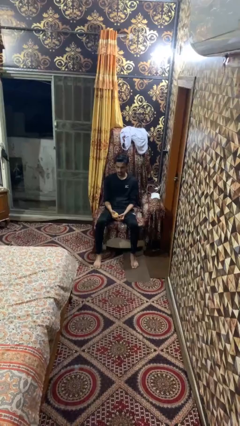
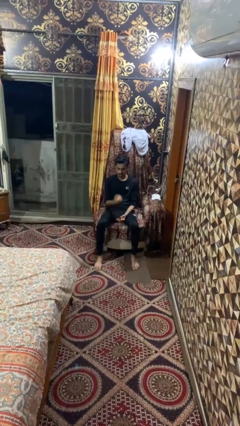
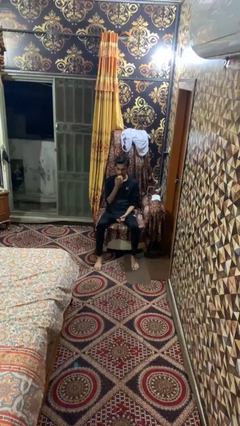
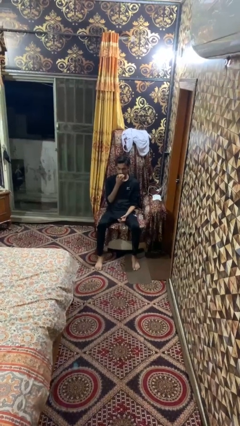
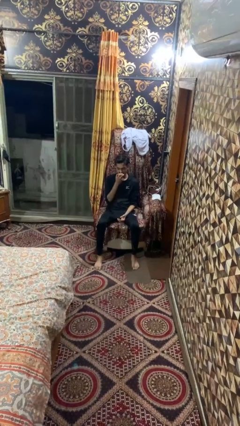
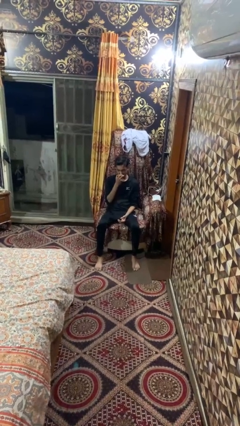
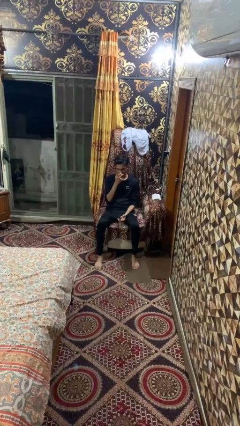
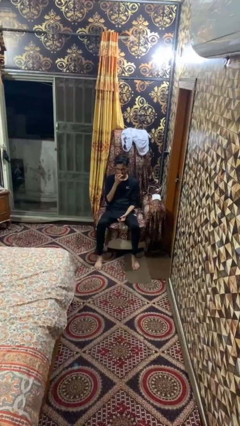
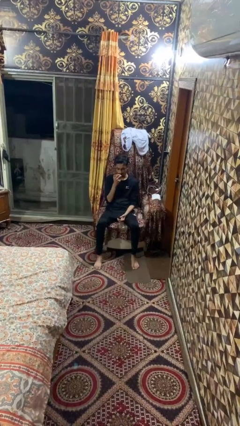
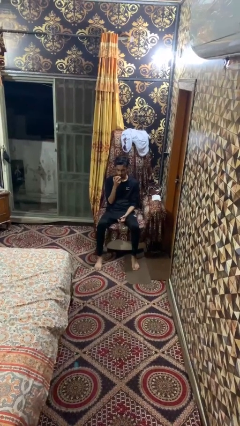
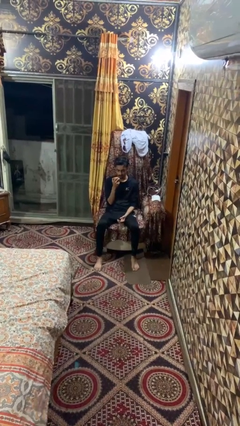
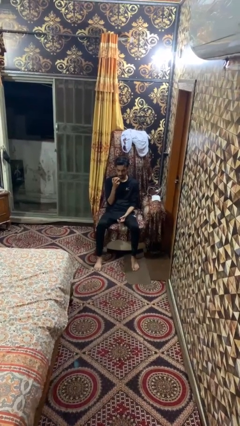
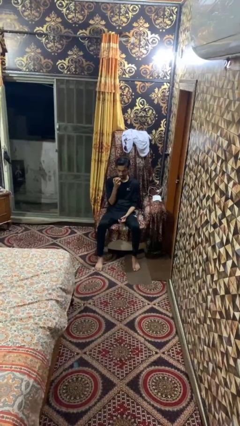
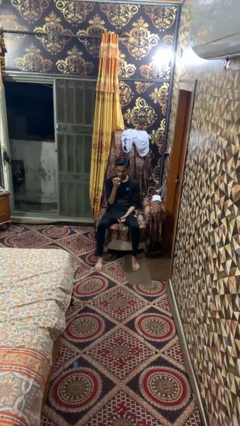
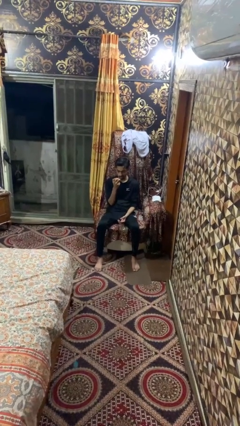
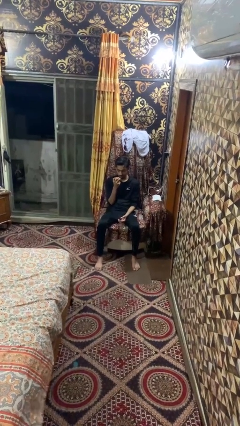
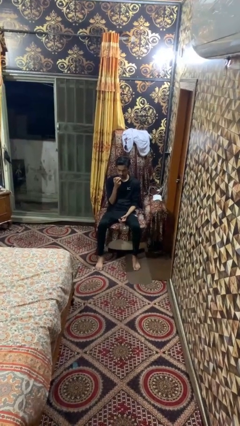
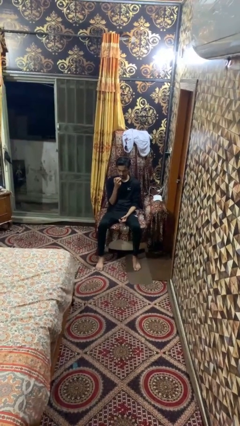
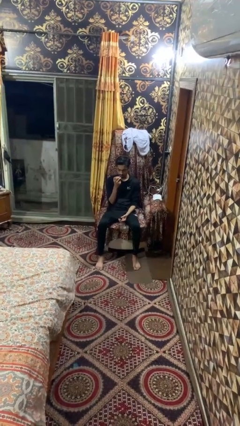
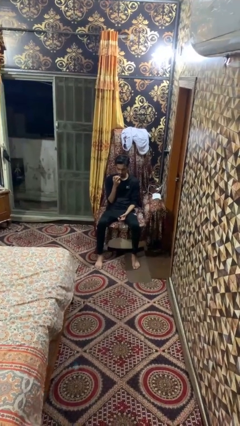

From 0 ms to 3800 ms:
person eats apple

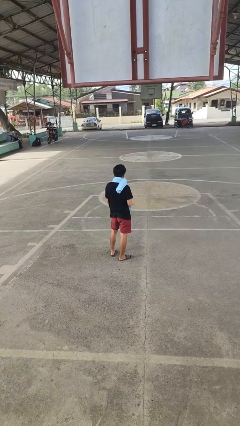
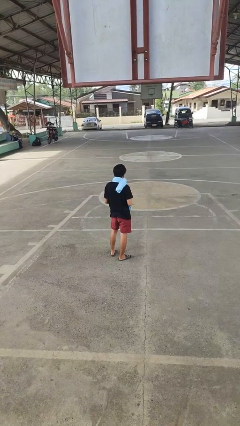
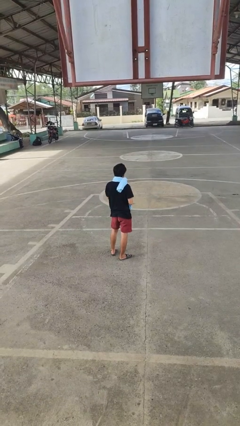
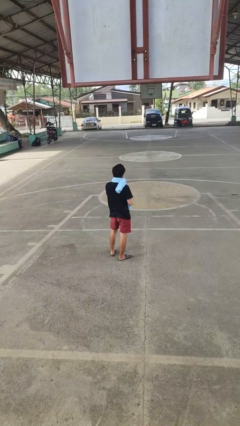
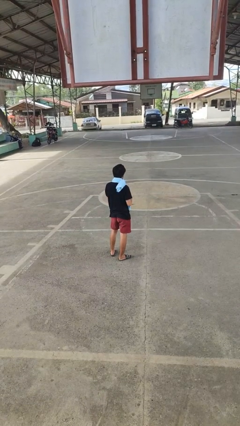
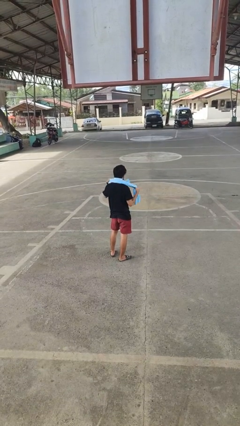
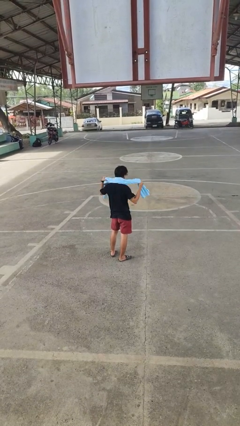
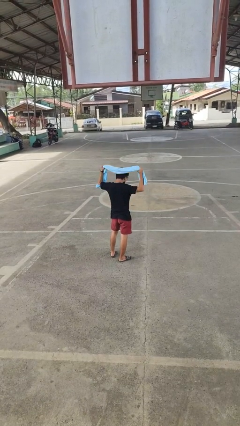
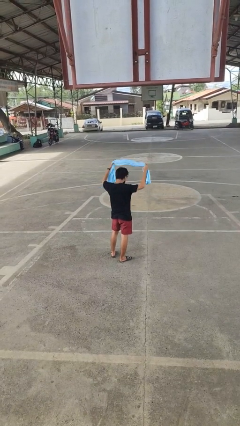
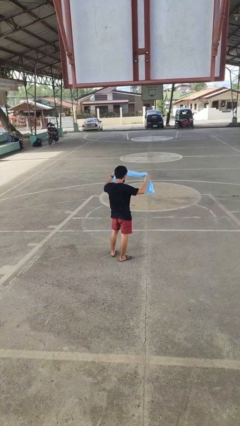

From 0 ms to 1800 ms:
person takes off scarf

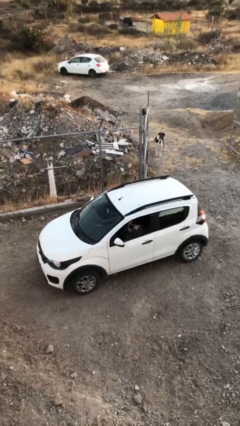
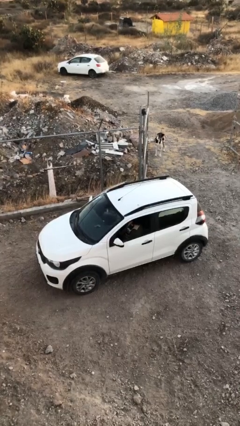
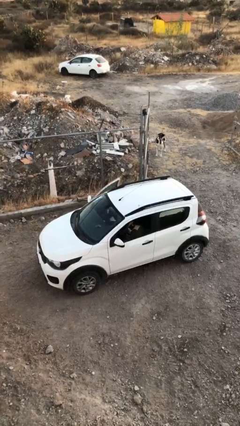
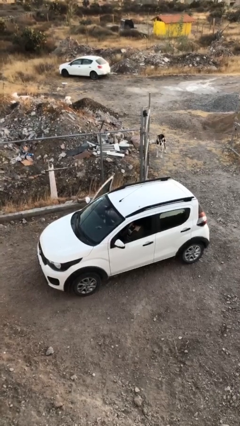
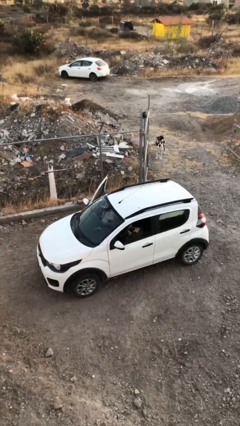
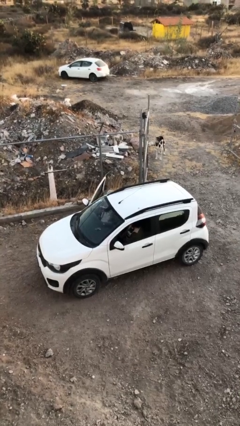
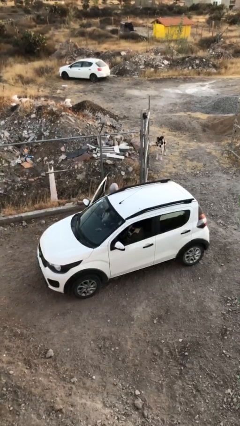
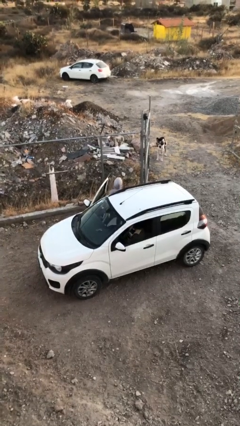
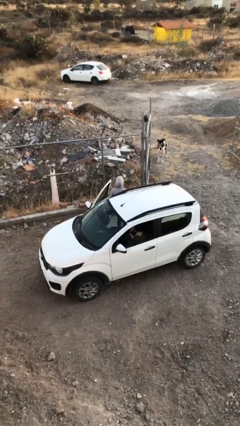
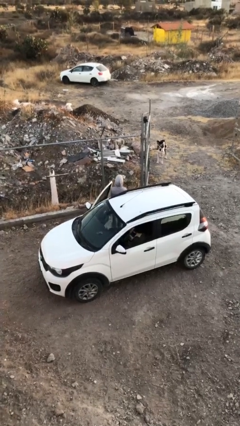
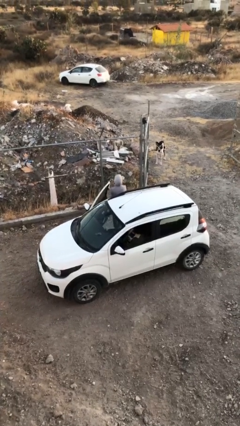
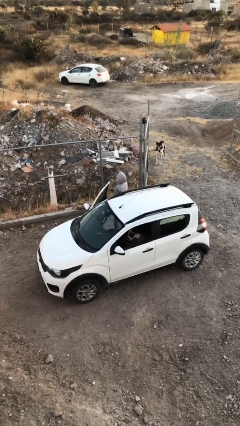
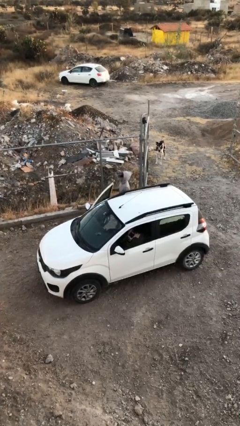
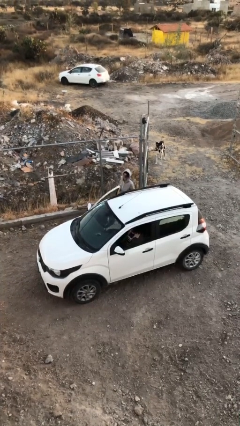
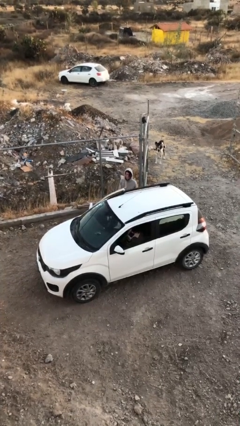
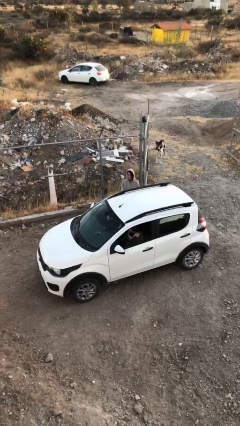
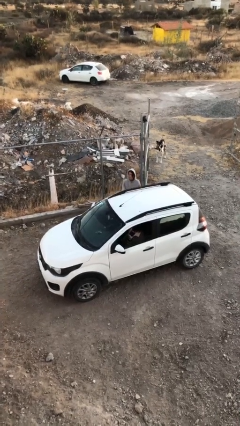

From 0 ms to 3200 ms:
car drops off person

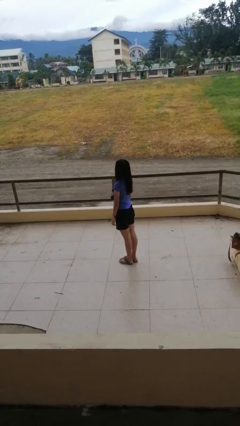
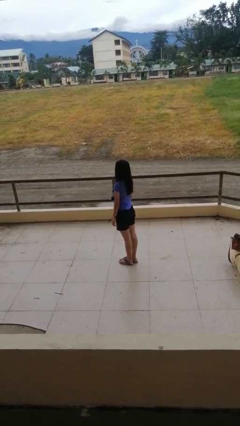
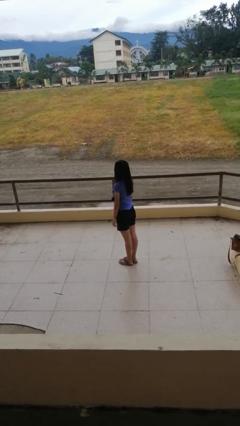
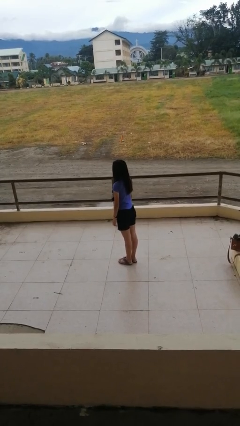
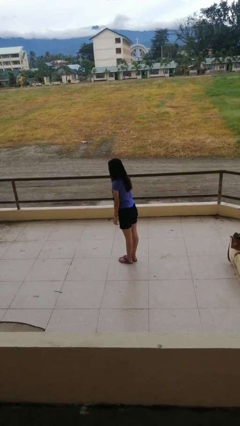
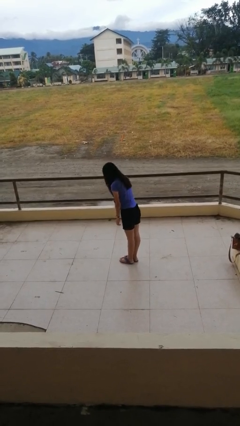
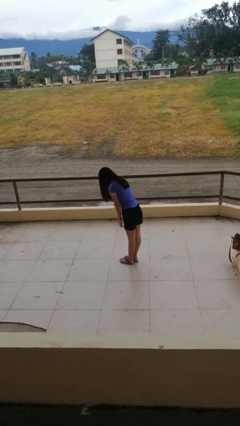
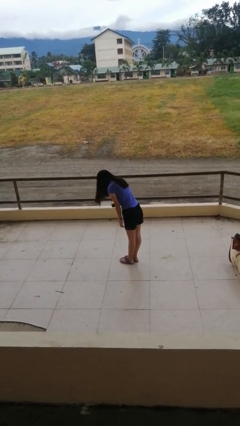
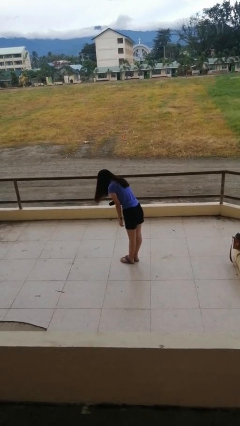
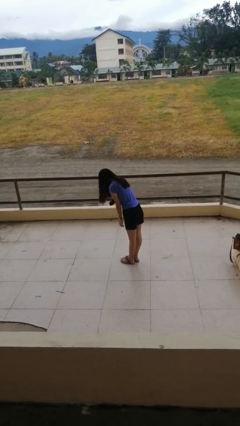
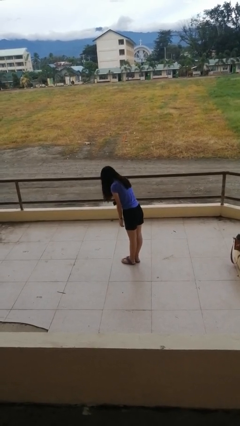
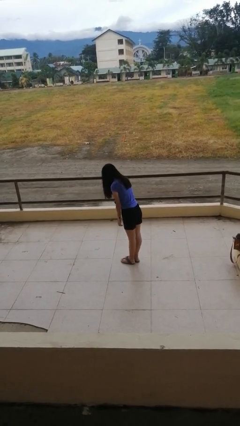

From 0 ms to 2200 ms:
person bows

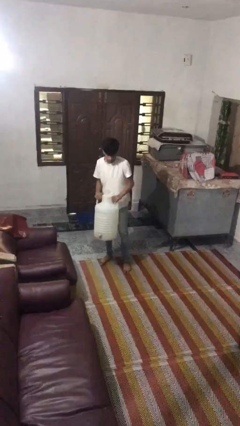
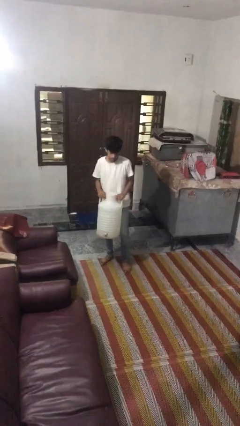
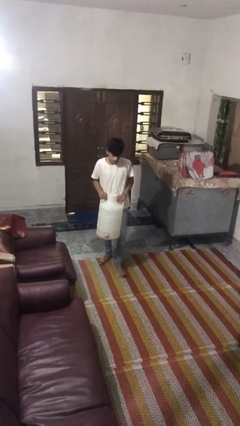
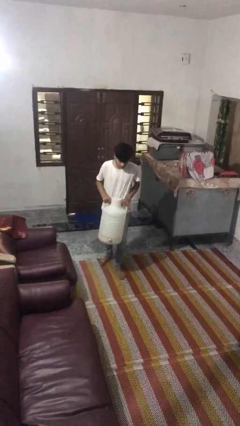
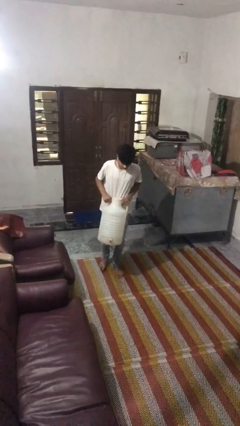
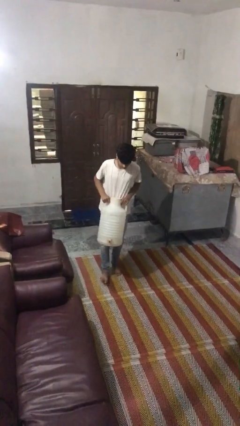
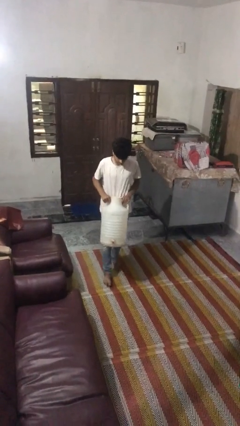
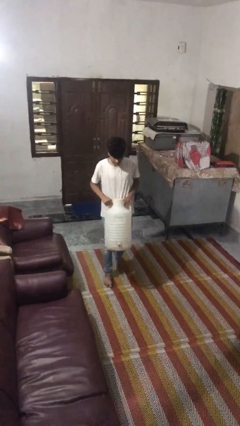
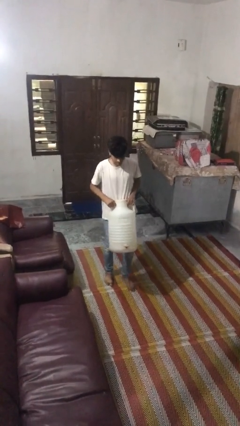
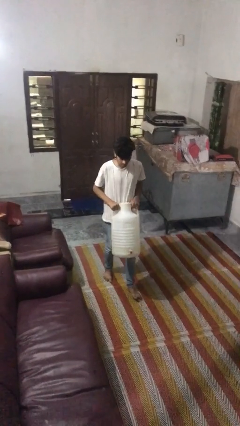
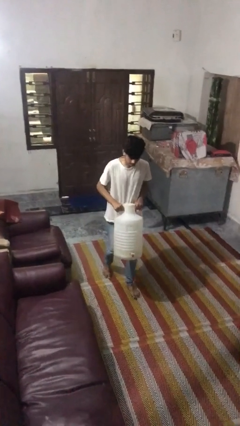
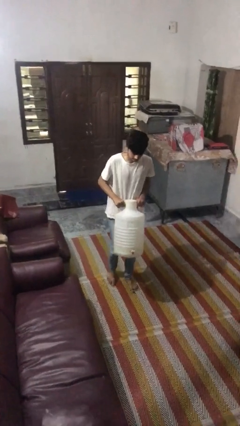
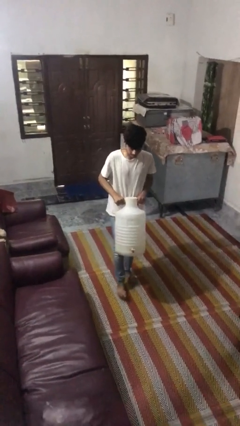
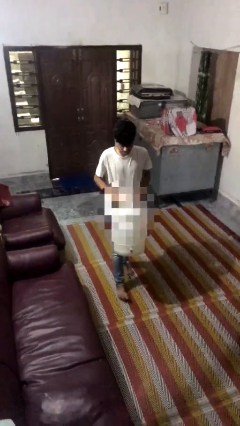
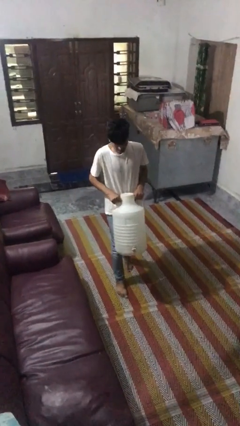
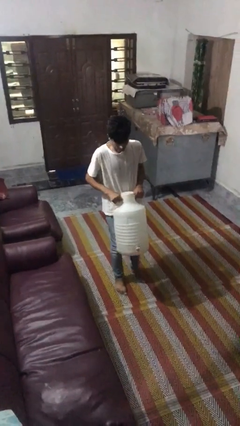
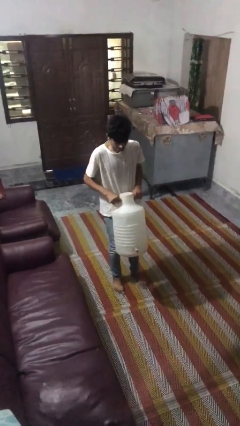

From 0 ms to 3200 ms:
person carries heavy object

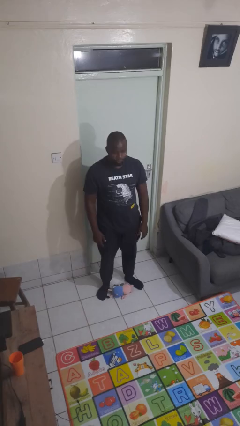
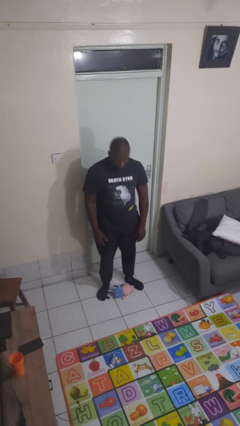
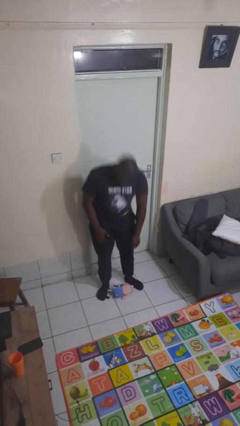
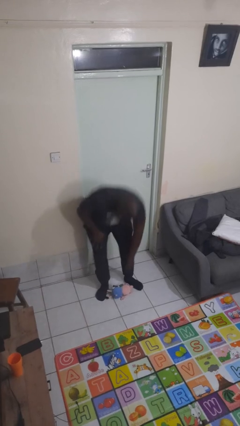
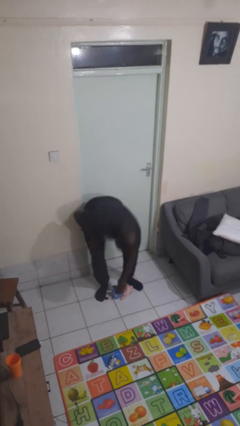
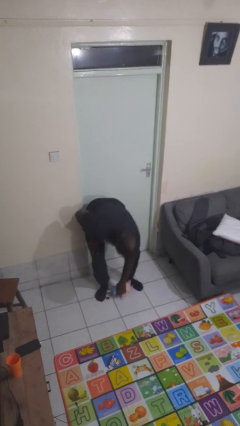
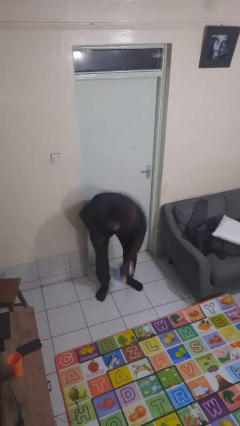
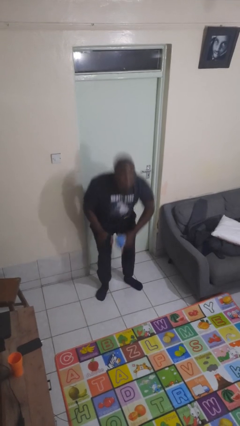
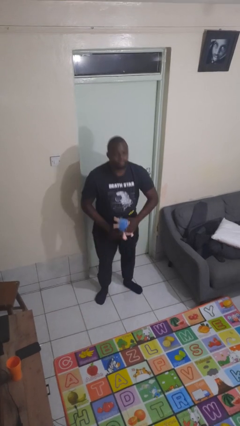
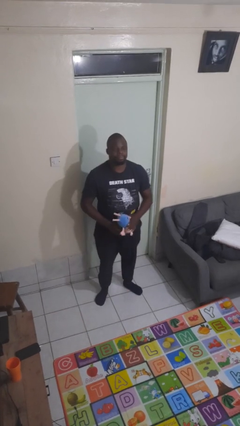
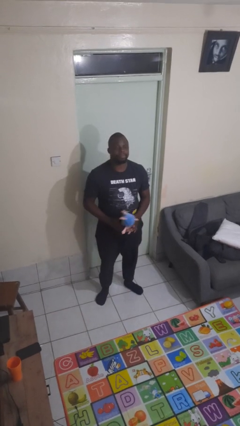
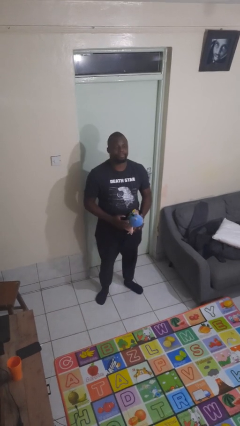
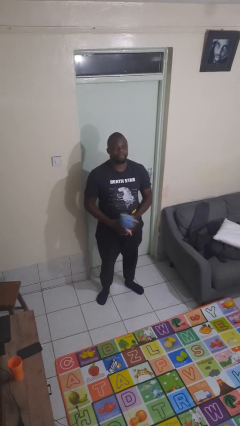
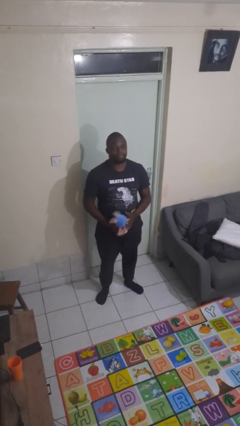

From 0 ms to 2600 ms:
person picks up object from floor

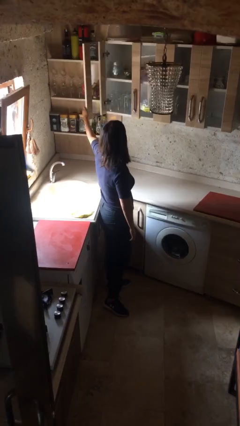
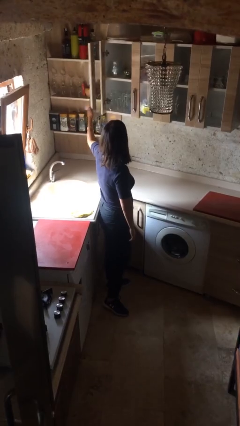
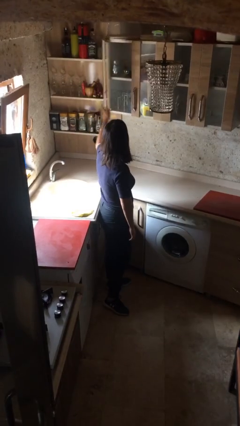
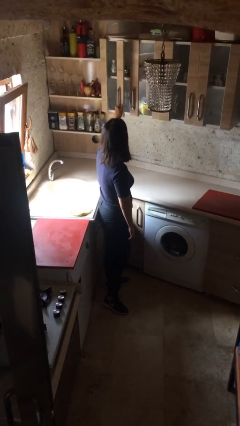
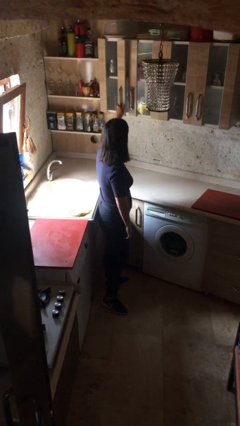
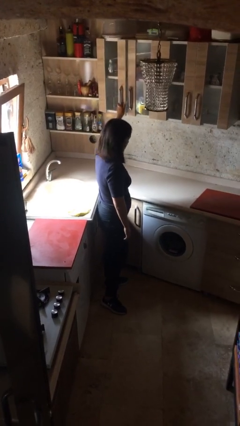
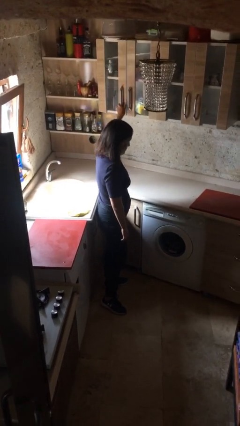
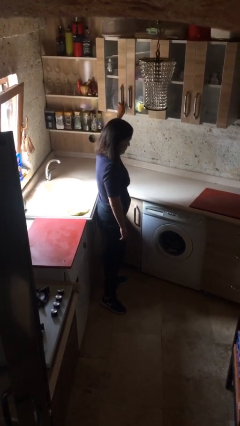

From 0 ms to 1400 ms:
person closes cabinet
